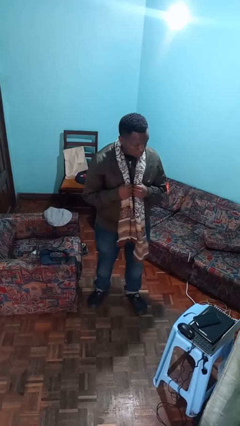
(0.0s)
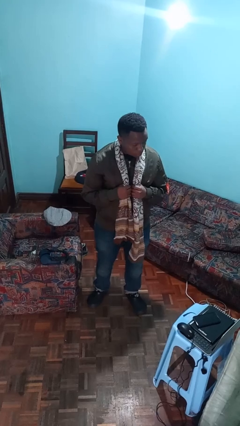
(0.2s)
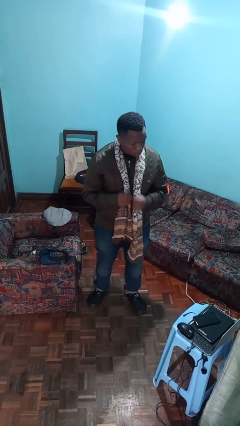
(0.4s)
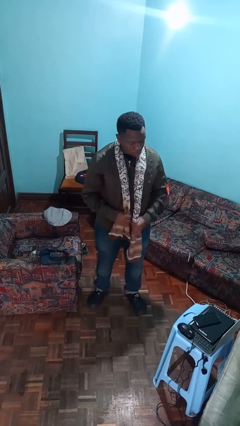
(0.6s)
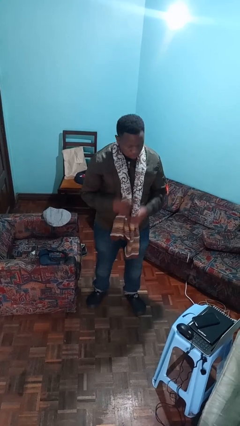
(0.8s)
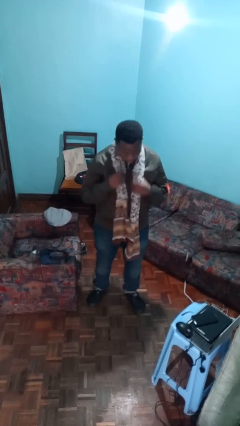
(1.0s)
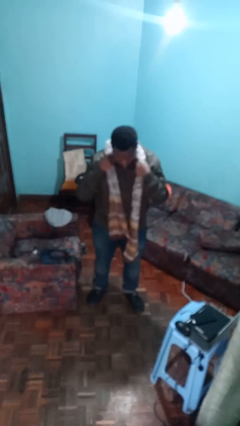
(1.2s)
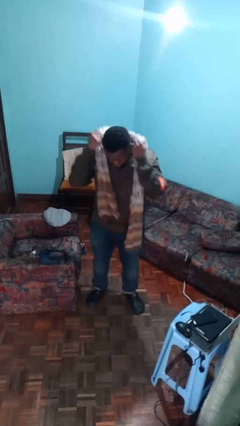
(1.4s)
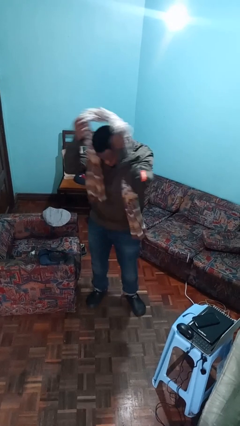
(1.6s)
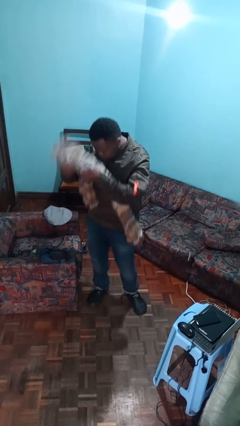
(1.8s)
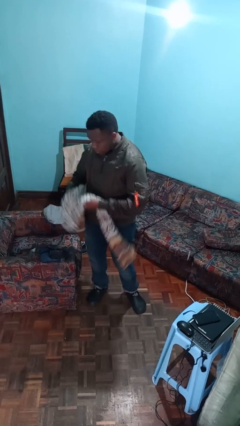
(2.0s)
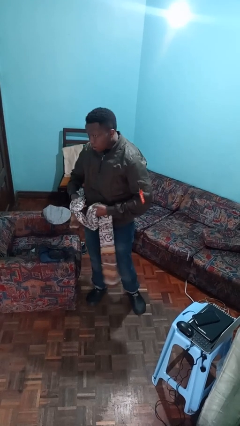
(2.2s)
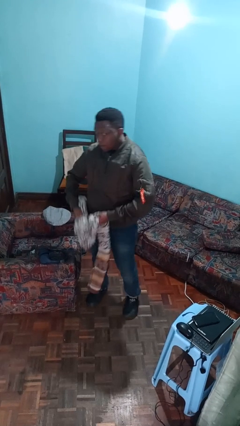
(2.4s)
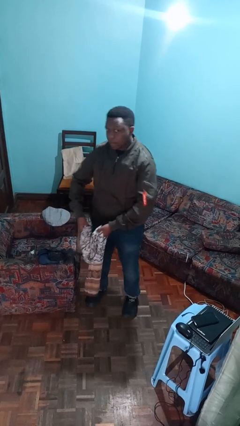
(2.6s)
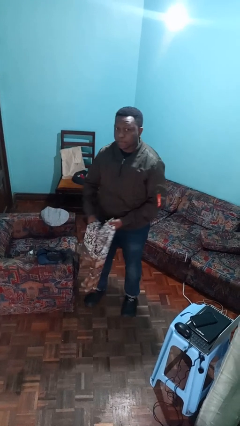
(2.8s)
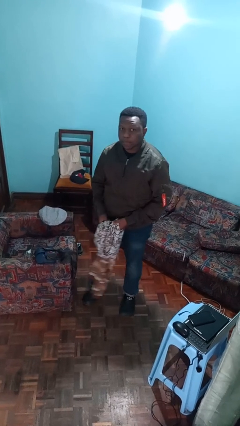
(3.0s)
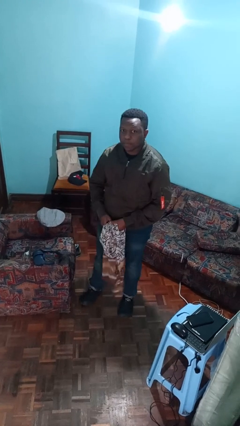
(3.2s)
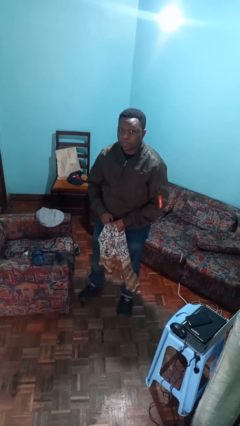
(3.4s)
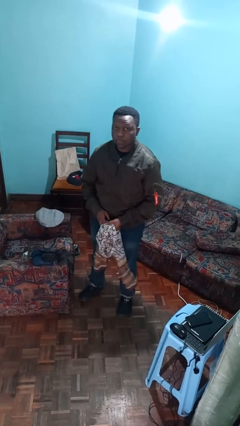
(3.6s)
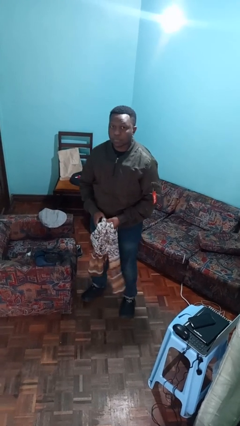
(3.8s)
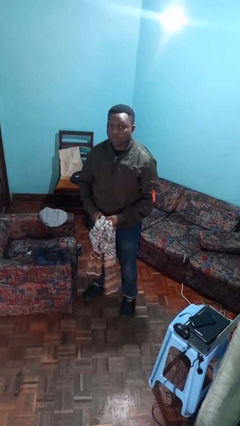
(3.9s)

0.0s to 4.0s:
person takes off scarf

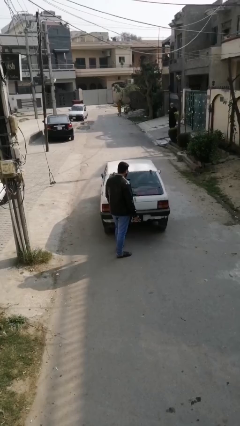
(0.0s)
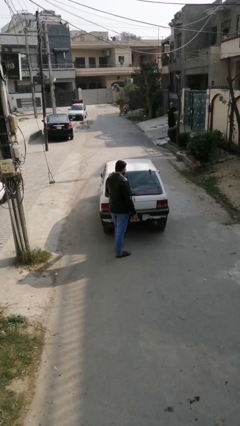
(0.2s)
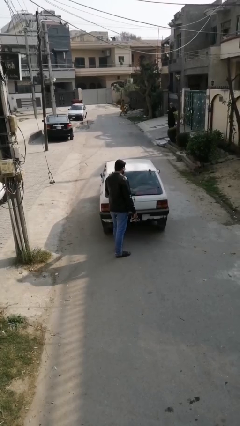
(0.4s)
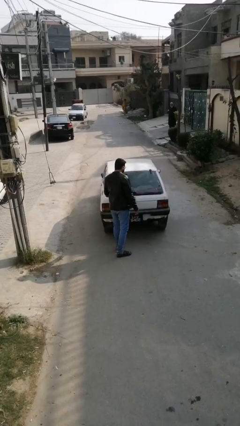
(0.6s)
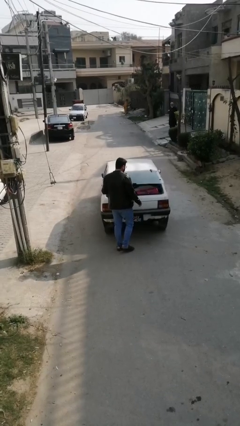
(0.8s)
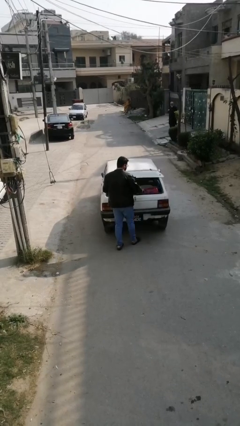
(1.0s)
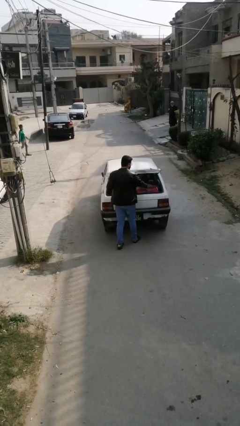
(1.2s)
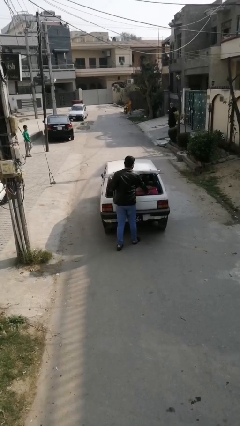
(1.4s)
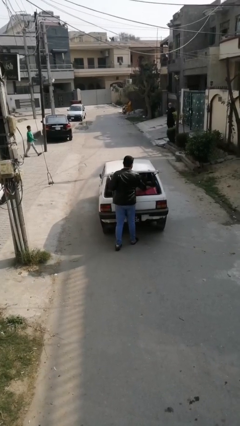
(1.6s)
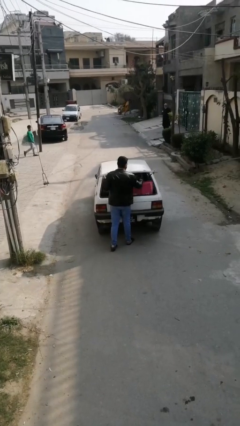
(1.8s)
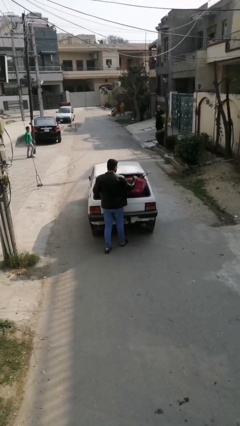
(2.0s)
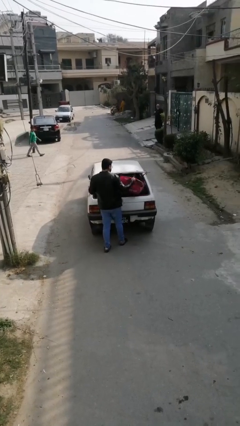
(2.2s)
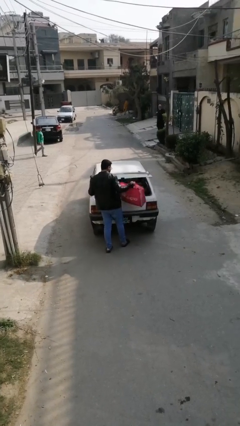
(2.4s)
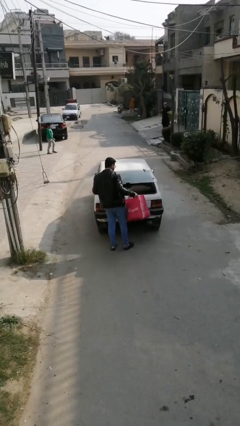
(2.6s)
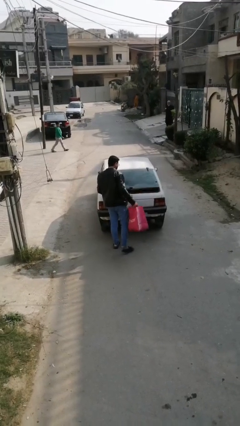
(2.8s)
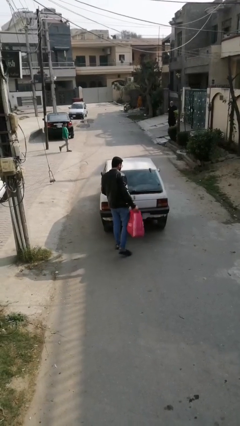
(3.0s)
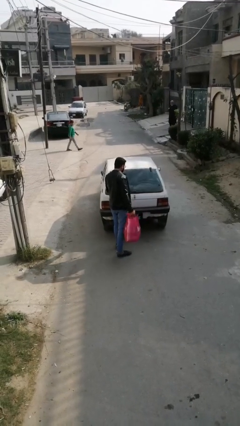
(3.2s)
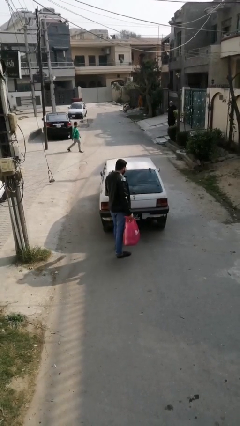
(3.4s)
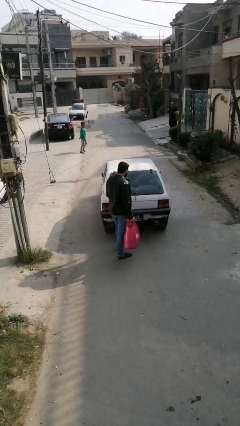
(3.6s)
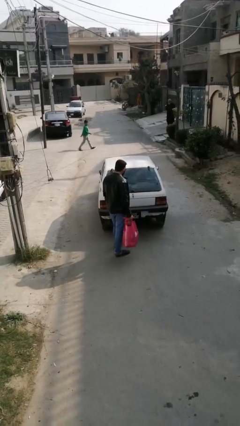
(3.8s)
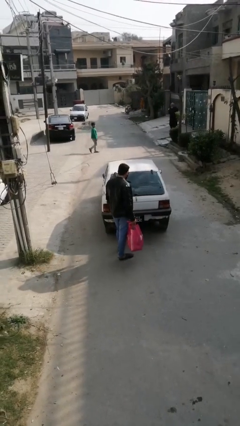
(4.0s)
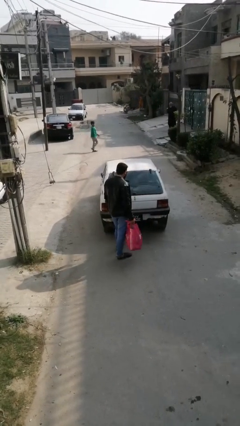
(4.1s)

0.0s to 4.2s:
person unloads car

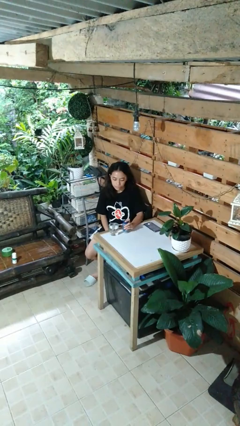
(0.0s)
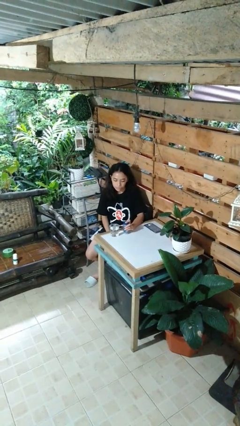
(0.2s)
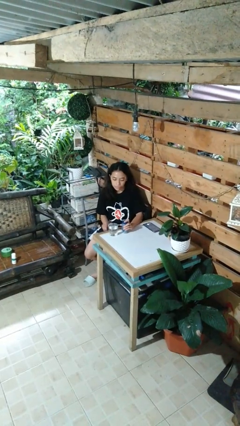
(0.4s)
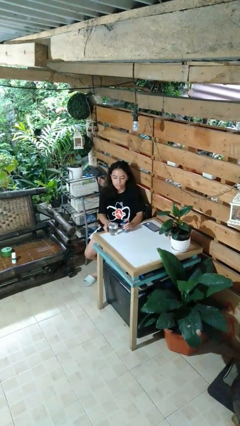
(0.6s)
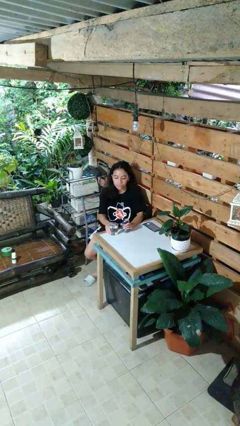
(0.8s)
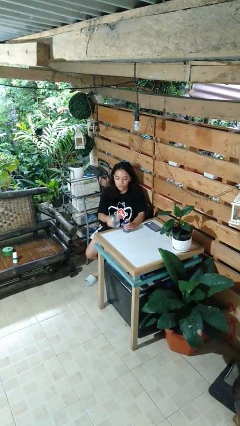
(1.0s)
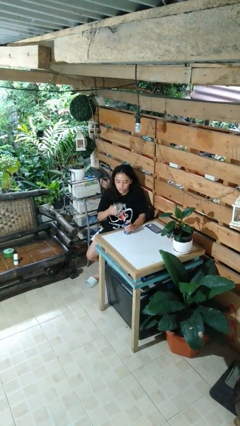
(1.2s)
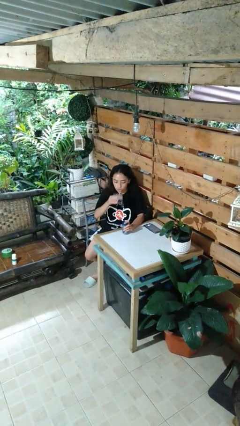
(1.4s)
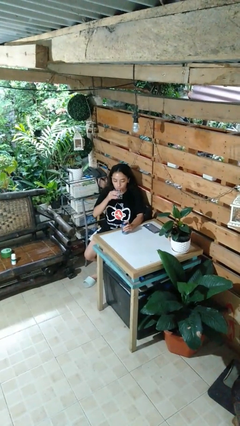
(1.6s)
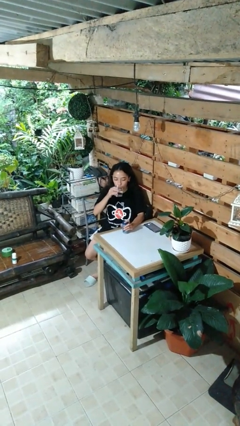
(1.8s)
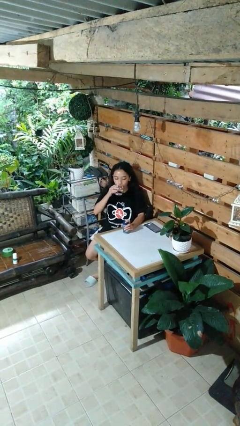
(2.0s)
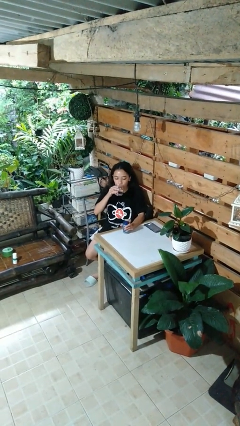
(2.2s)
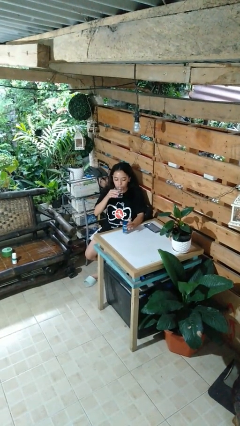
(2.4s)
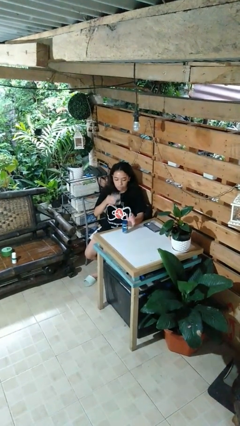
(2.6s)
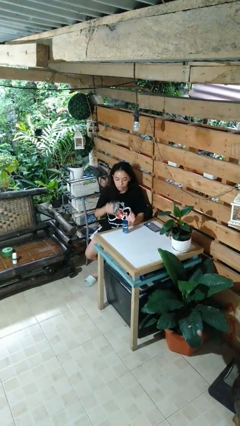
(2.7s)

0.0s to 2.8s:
person drinks from cup

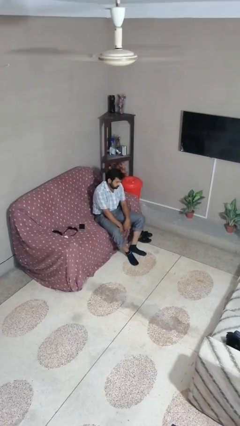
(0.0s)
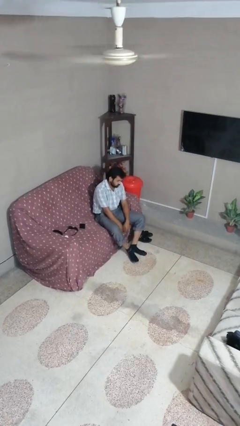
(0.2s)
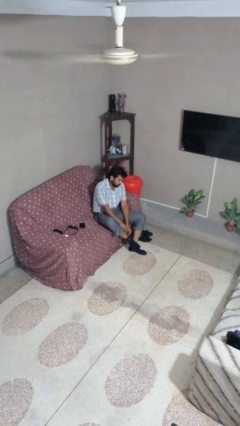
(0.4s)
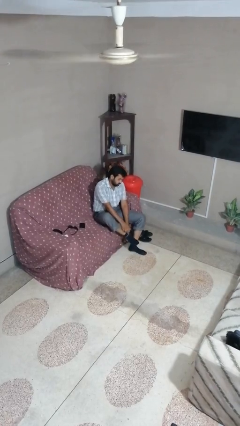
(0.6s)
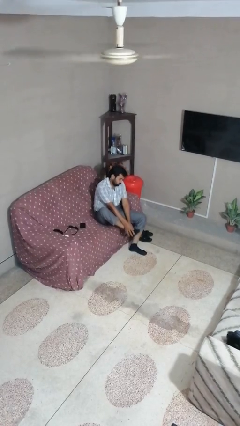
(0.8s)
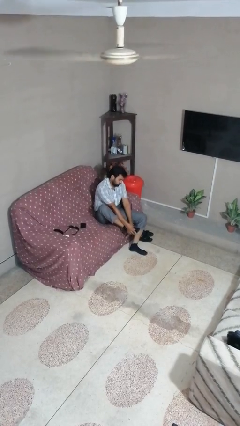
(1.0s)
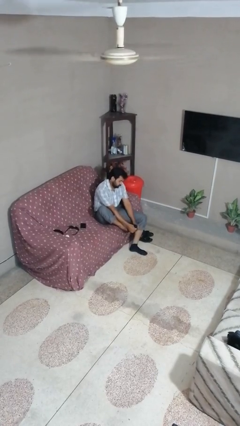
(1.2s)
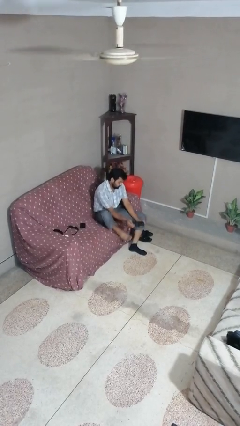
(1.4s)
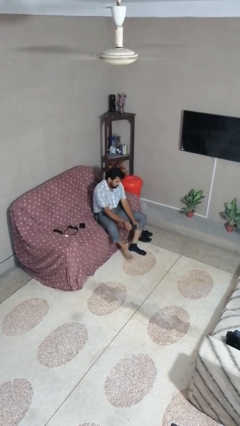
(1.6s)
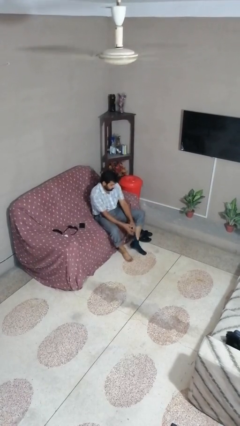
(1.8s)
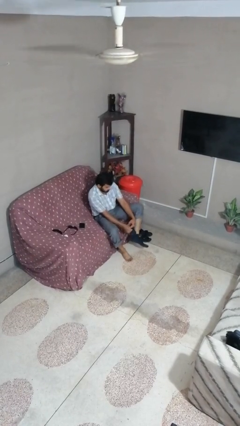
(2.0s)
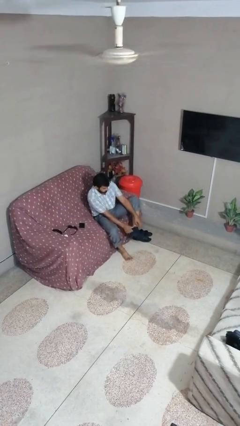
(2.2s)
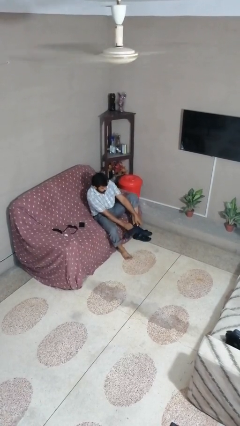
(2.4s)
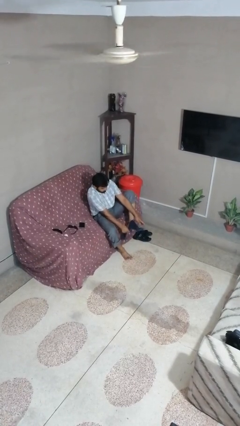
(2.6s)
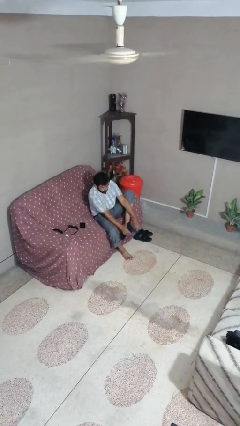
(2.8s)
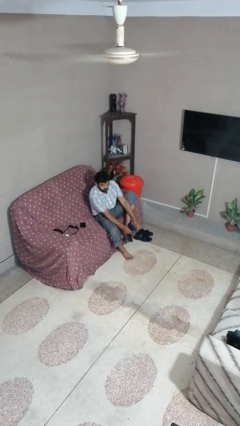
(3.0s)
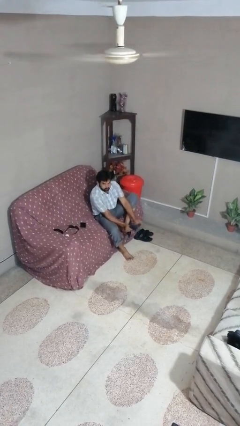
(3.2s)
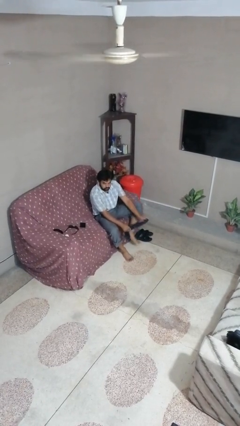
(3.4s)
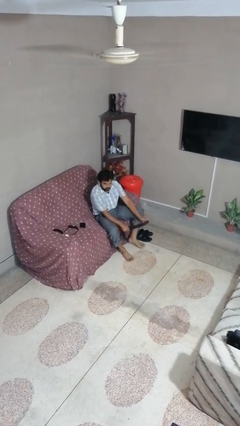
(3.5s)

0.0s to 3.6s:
person takes off socks

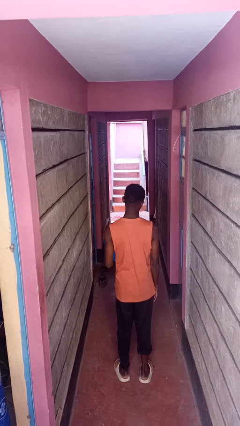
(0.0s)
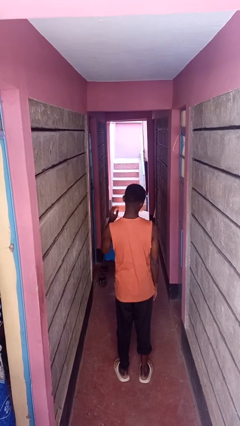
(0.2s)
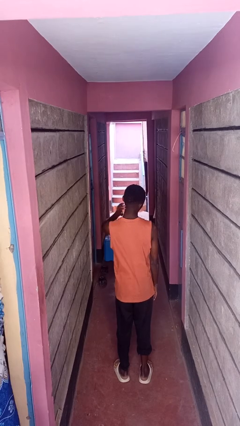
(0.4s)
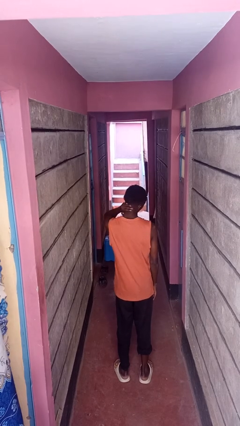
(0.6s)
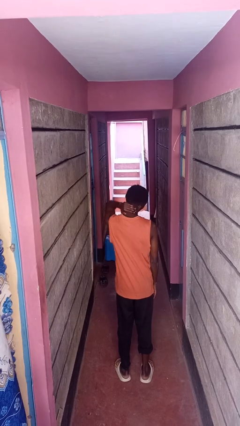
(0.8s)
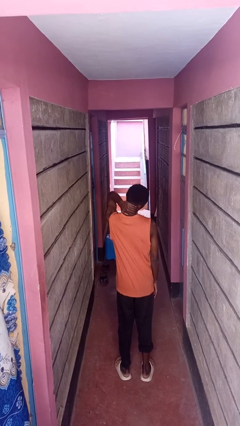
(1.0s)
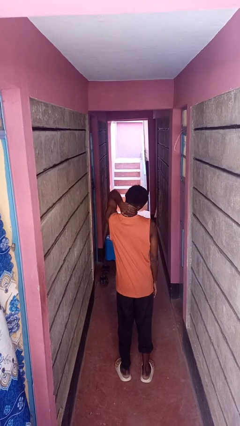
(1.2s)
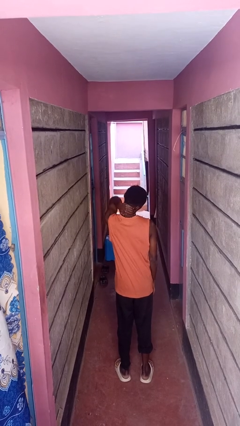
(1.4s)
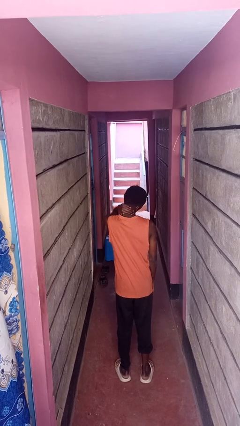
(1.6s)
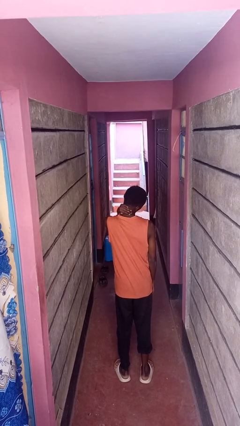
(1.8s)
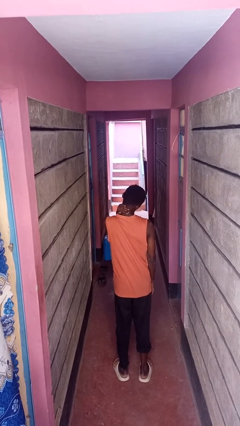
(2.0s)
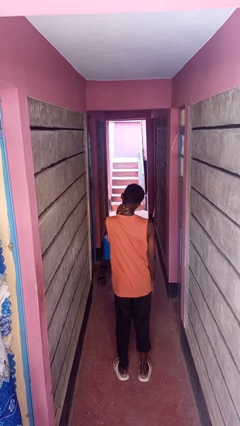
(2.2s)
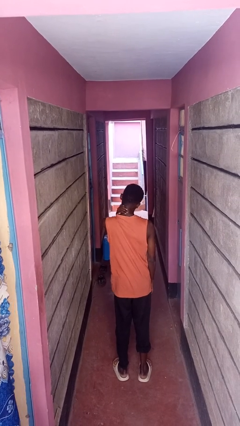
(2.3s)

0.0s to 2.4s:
person rubs neck

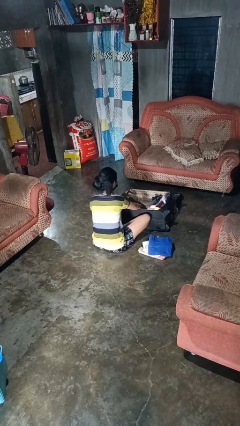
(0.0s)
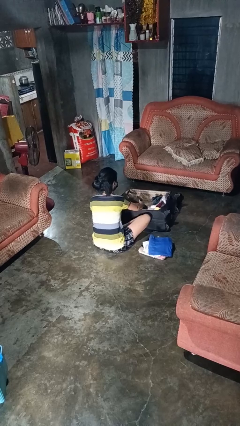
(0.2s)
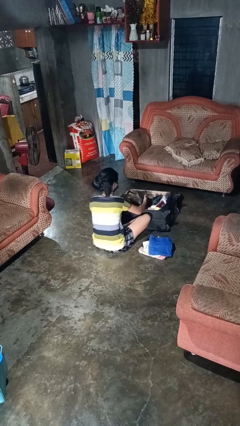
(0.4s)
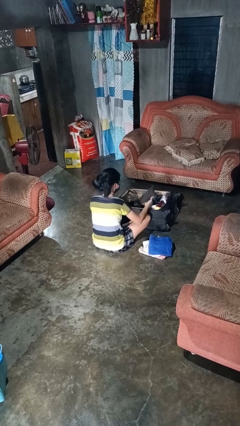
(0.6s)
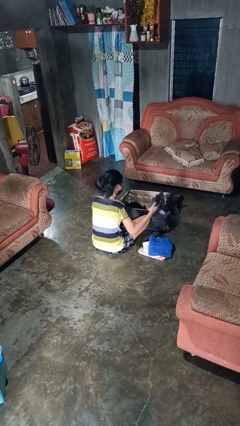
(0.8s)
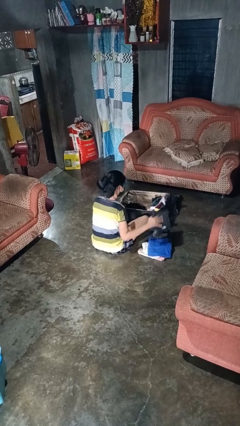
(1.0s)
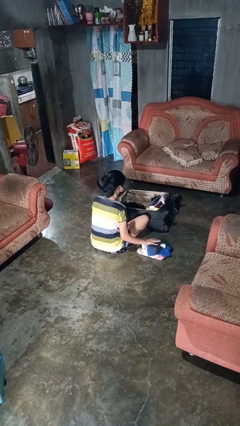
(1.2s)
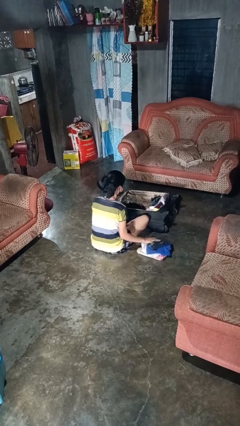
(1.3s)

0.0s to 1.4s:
person unloads clothes from suitcase
